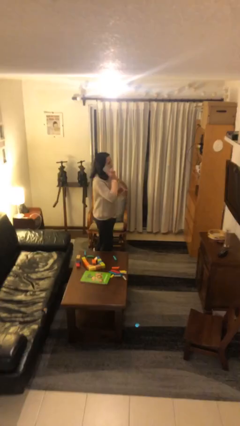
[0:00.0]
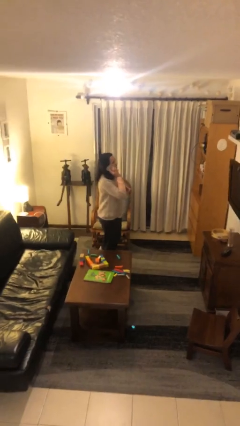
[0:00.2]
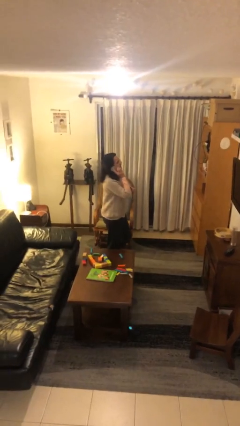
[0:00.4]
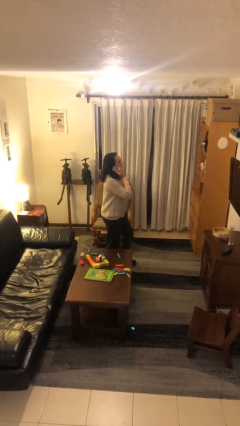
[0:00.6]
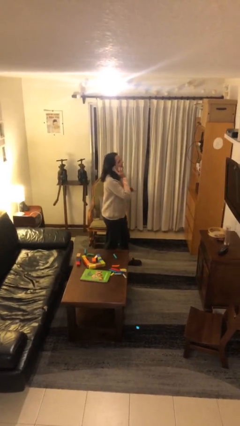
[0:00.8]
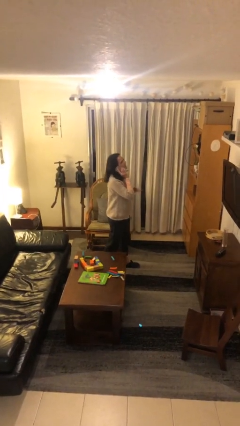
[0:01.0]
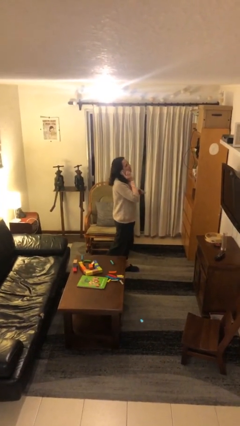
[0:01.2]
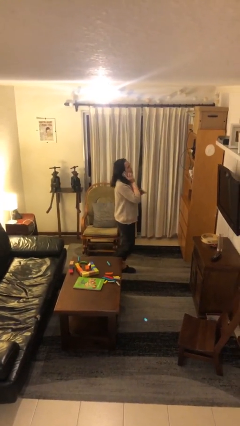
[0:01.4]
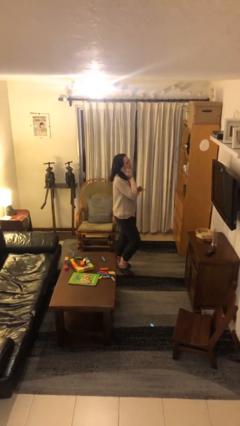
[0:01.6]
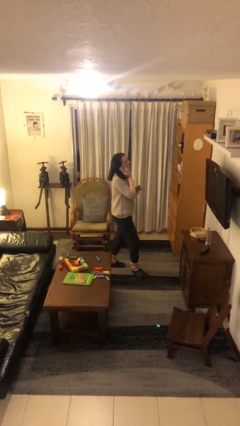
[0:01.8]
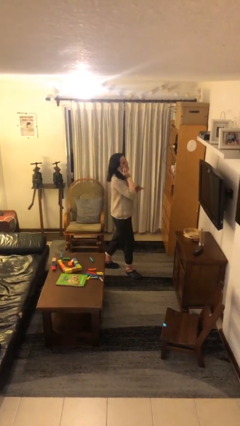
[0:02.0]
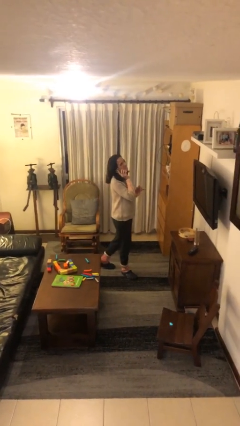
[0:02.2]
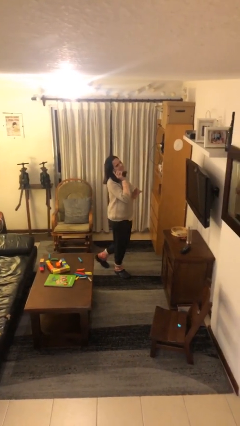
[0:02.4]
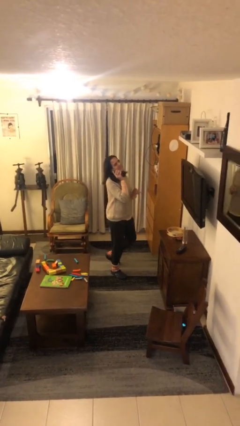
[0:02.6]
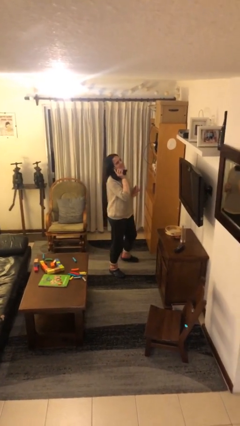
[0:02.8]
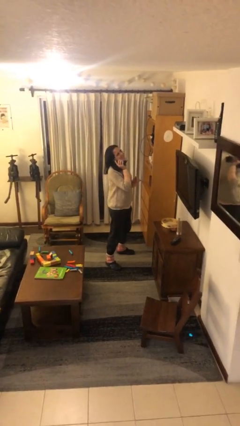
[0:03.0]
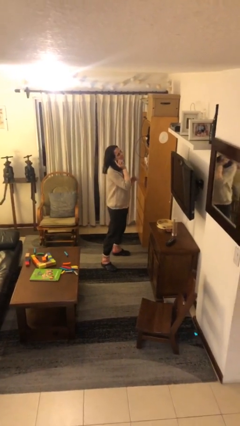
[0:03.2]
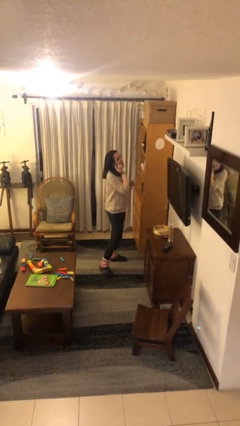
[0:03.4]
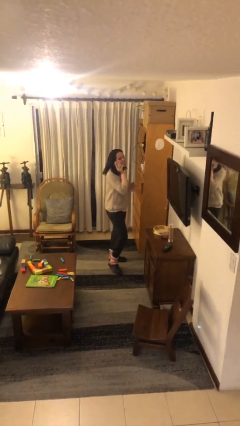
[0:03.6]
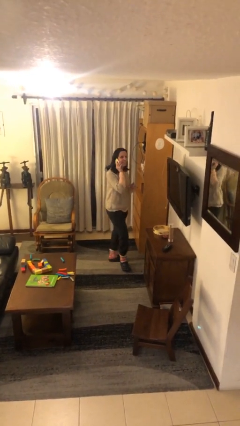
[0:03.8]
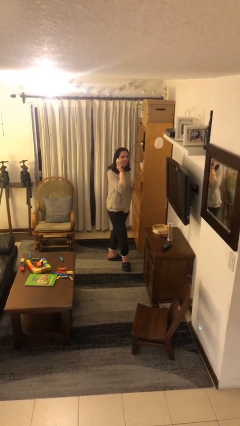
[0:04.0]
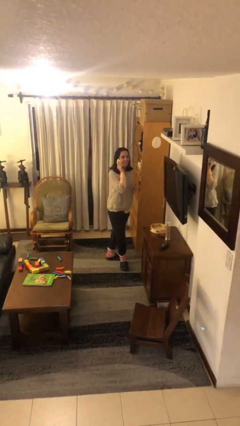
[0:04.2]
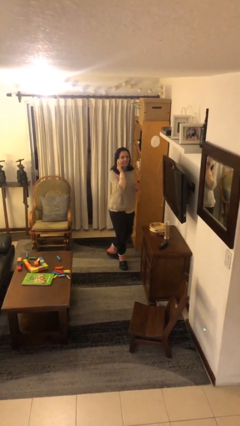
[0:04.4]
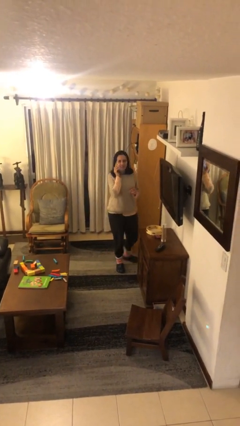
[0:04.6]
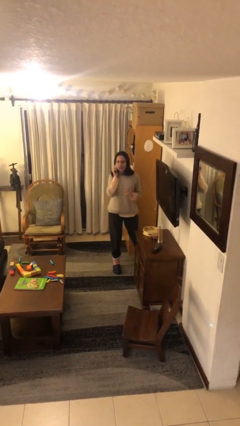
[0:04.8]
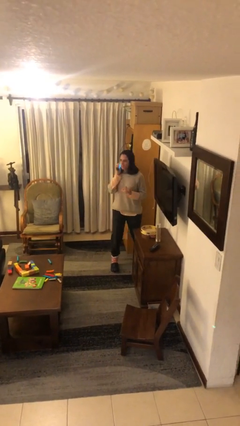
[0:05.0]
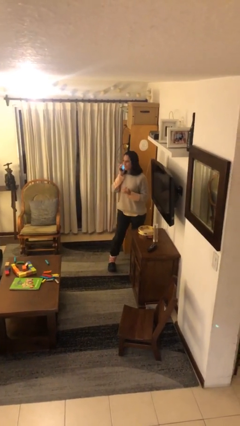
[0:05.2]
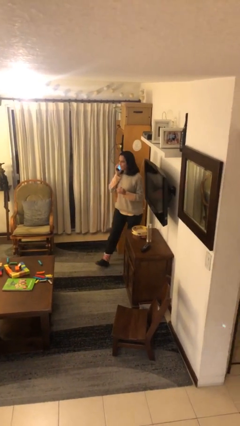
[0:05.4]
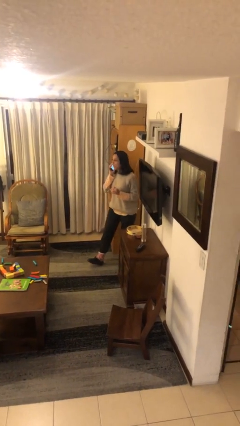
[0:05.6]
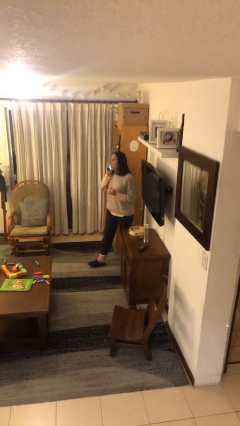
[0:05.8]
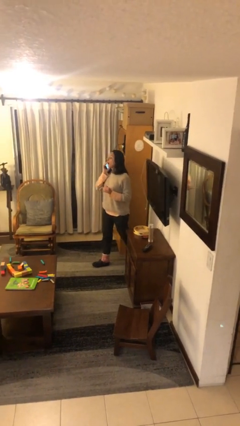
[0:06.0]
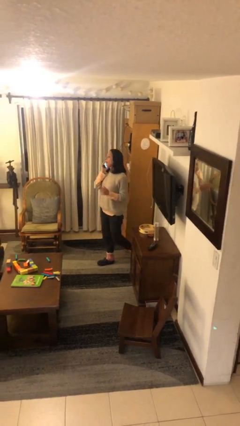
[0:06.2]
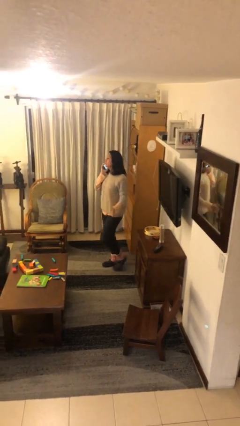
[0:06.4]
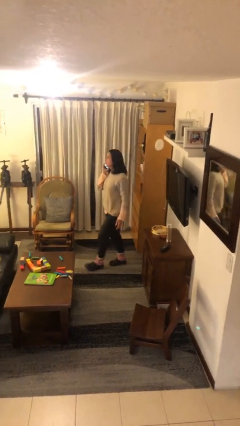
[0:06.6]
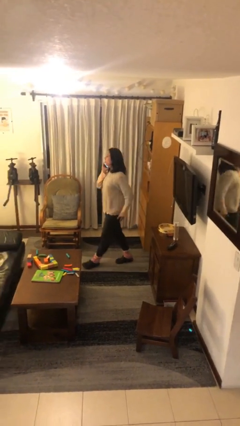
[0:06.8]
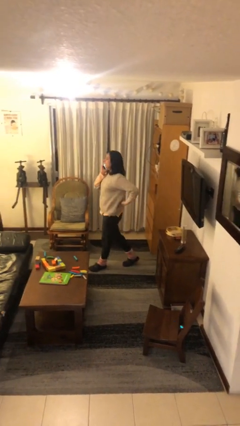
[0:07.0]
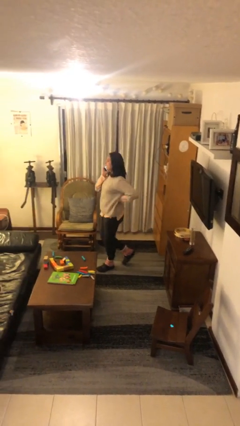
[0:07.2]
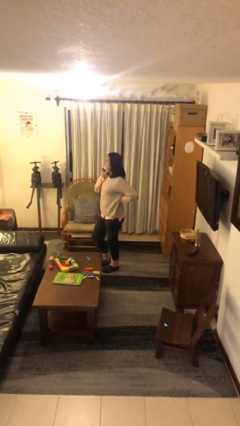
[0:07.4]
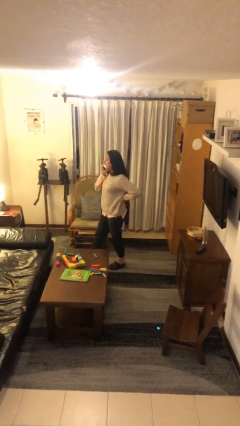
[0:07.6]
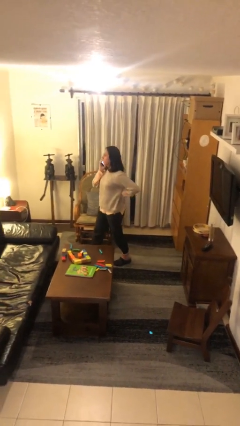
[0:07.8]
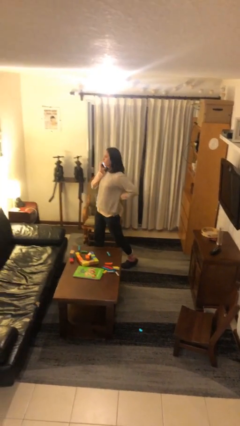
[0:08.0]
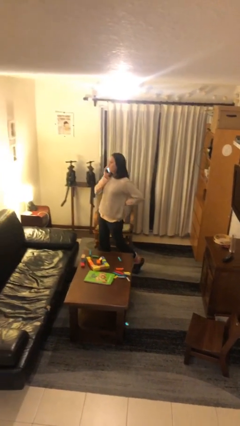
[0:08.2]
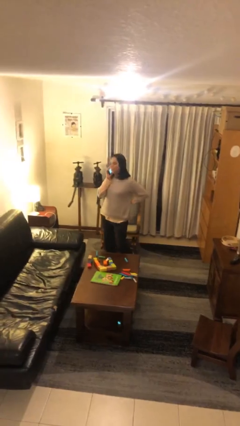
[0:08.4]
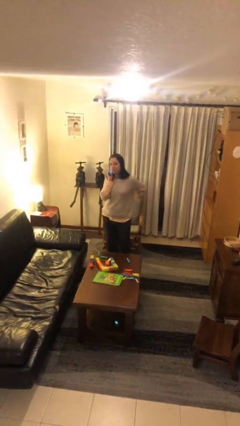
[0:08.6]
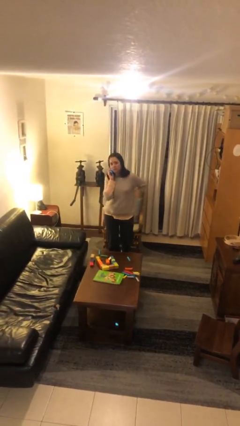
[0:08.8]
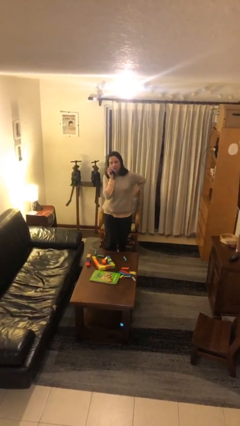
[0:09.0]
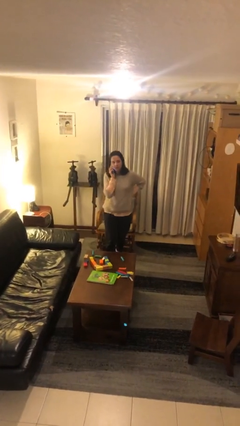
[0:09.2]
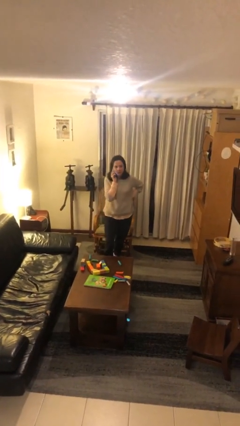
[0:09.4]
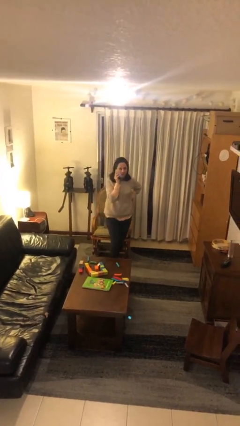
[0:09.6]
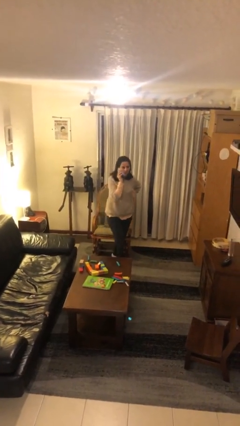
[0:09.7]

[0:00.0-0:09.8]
person talks on phone

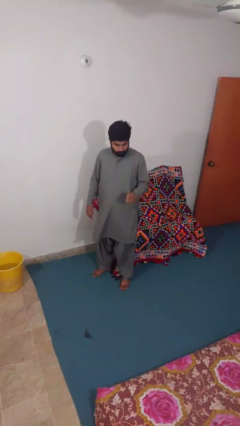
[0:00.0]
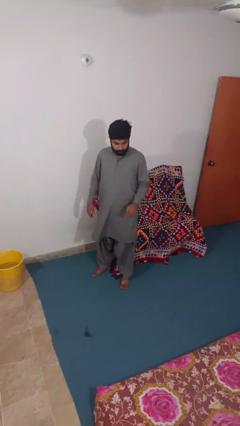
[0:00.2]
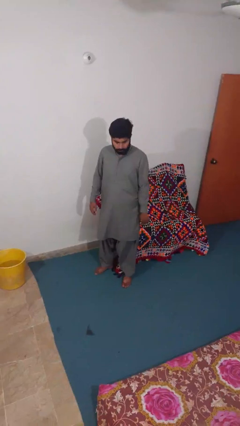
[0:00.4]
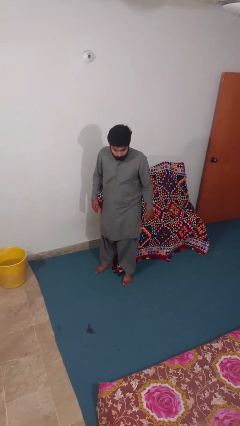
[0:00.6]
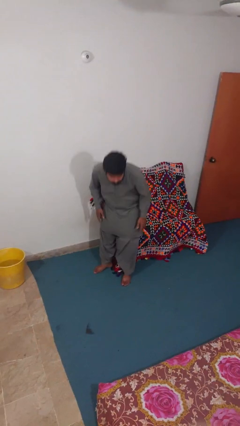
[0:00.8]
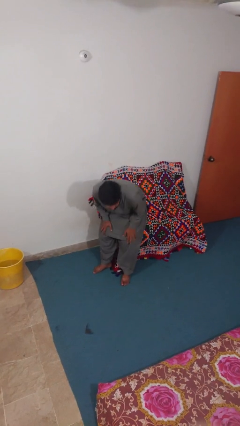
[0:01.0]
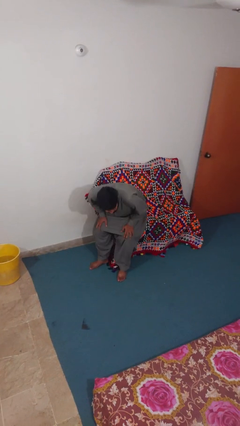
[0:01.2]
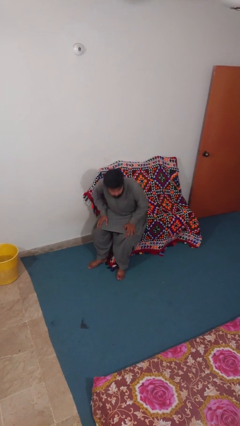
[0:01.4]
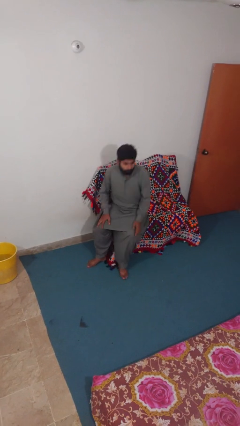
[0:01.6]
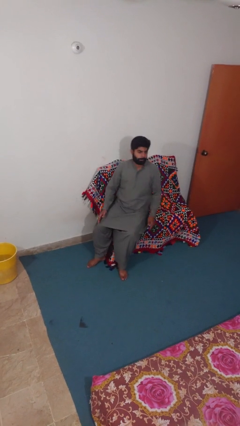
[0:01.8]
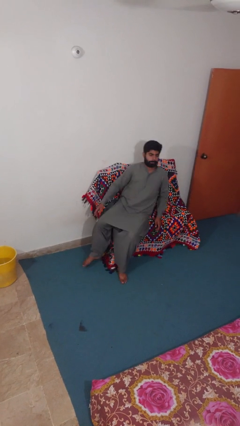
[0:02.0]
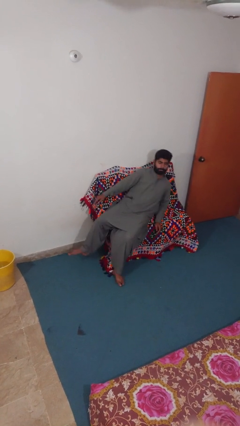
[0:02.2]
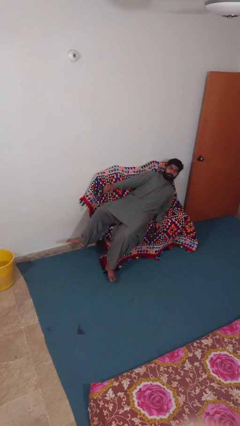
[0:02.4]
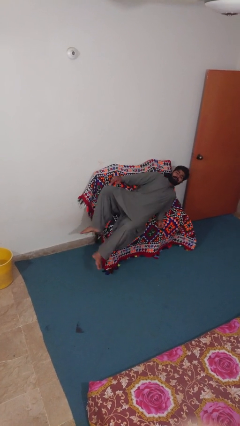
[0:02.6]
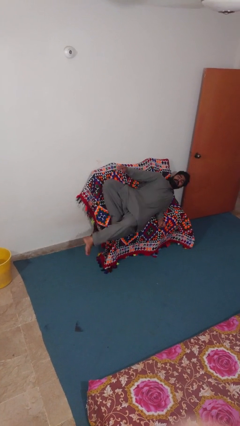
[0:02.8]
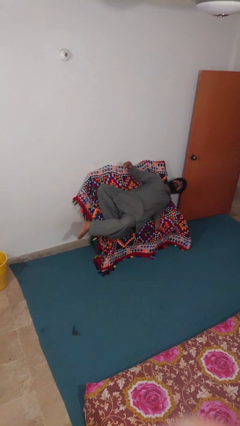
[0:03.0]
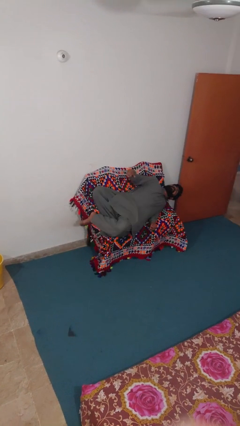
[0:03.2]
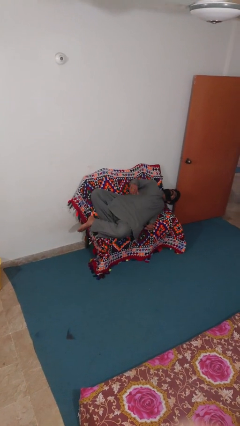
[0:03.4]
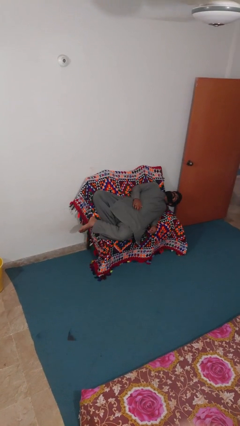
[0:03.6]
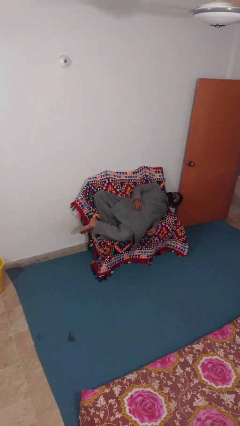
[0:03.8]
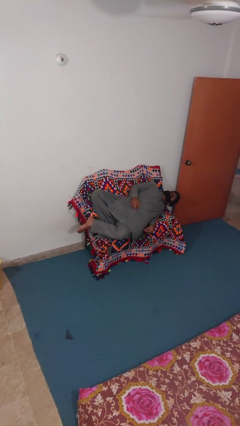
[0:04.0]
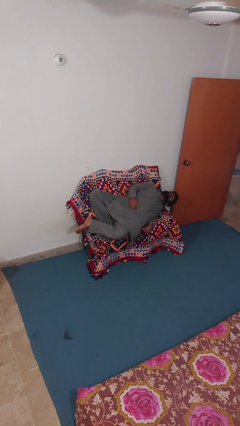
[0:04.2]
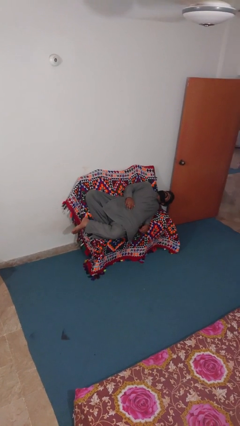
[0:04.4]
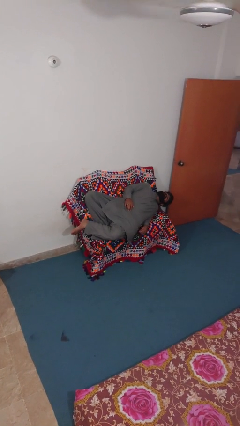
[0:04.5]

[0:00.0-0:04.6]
person lies down on couch

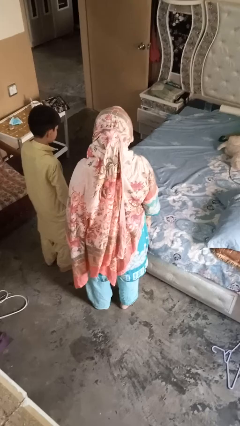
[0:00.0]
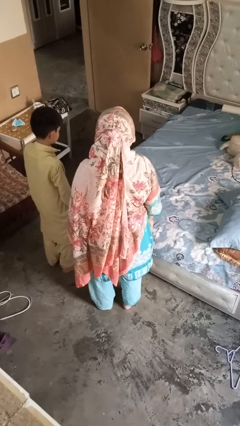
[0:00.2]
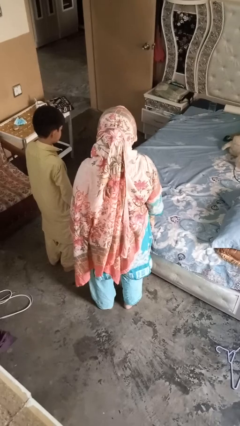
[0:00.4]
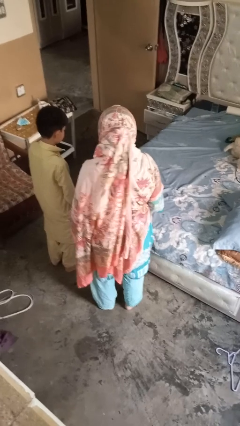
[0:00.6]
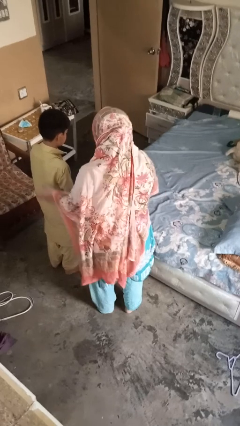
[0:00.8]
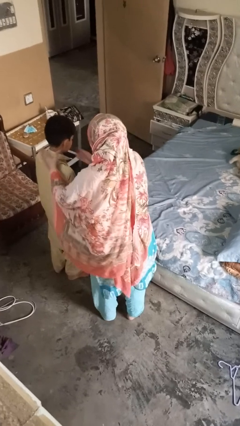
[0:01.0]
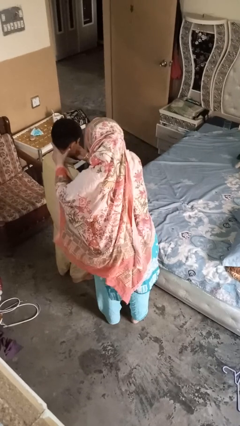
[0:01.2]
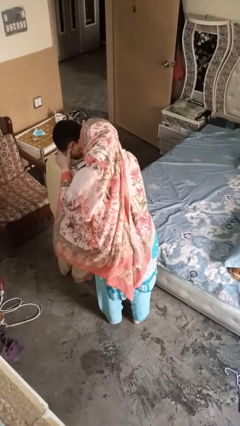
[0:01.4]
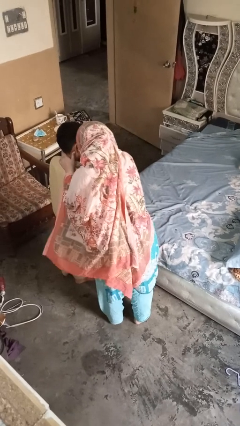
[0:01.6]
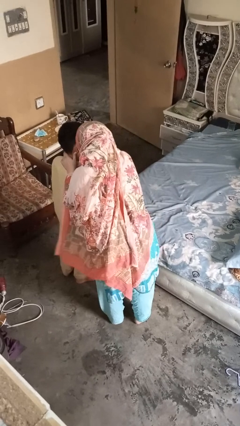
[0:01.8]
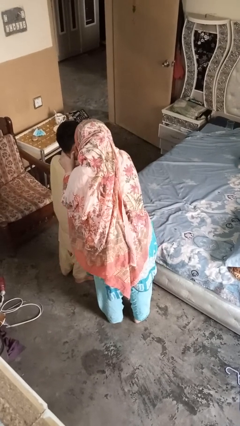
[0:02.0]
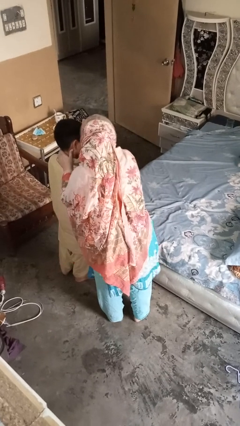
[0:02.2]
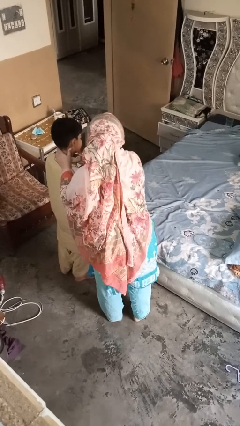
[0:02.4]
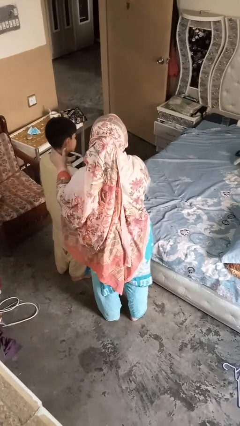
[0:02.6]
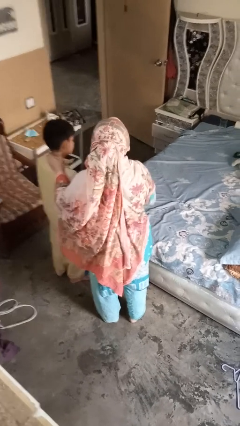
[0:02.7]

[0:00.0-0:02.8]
person gestures blow kiss
